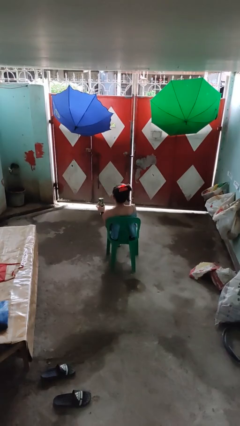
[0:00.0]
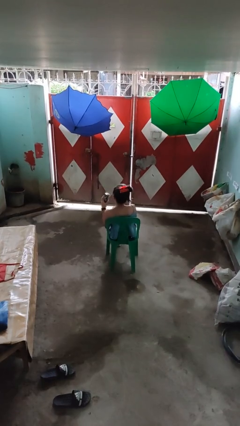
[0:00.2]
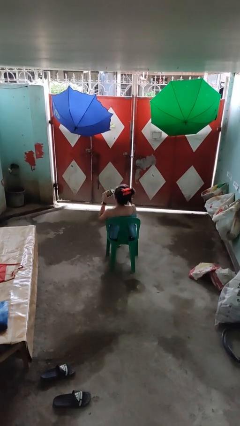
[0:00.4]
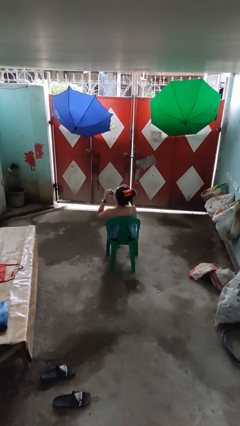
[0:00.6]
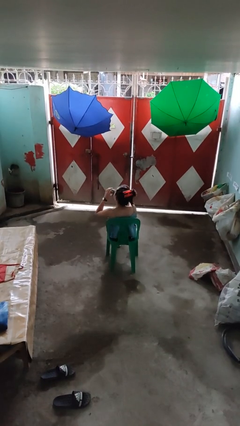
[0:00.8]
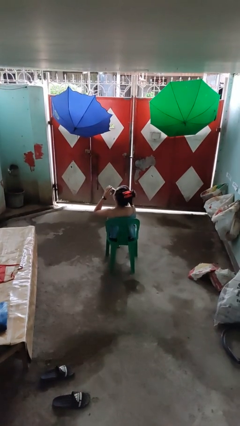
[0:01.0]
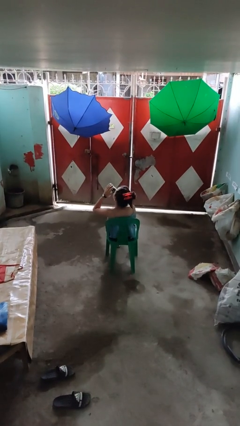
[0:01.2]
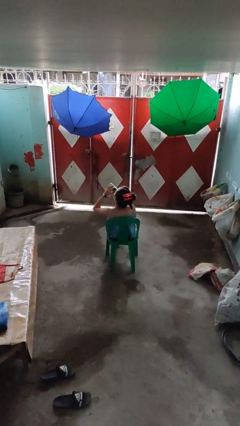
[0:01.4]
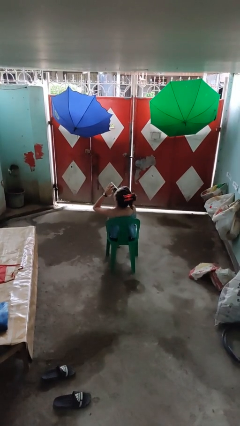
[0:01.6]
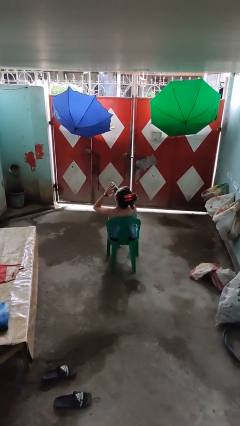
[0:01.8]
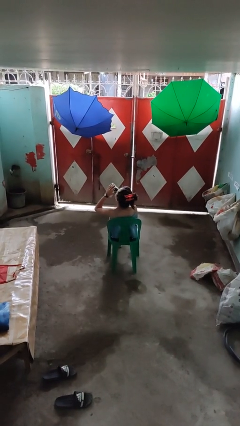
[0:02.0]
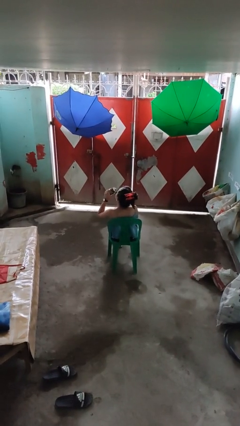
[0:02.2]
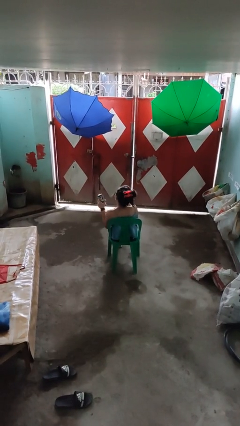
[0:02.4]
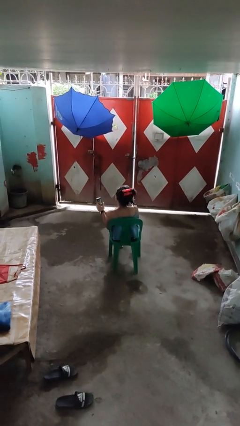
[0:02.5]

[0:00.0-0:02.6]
person drinks from beverage can

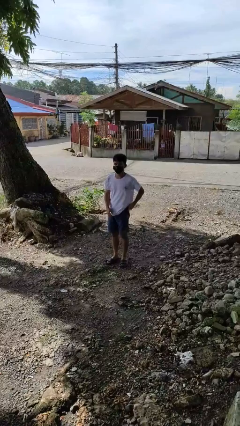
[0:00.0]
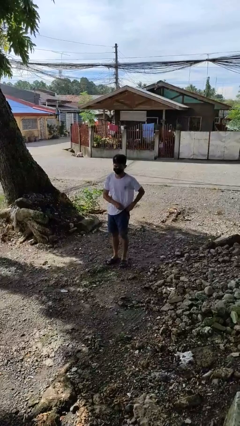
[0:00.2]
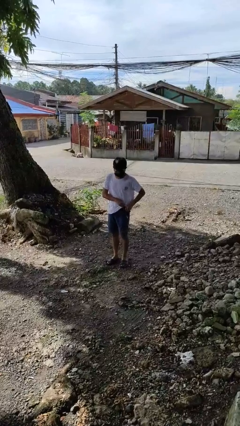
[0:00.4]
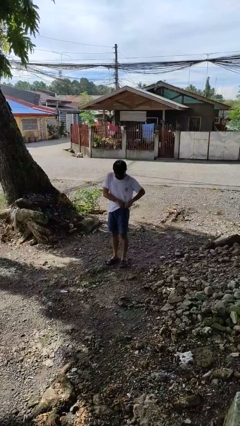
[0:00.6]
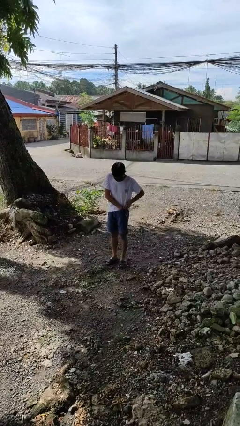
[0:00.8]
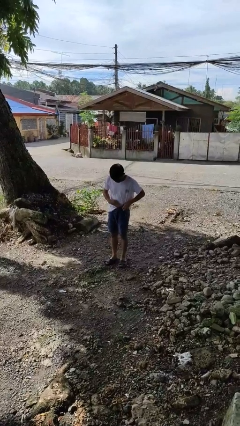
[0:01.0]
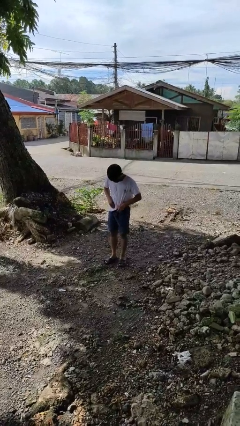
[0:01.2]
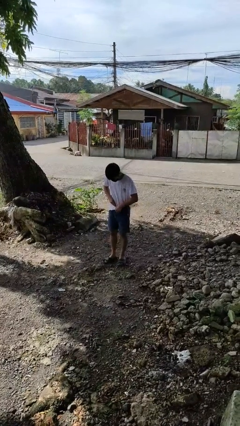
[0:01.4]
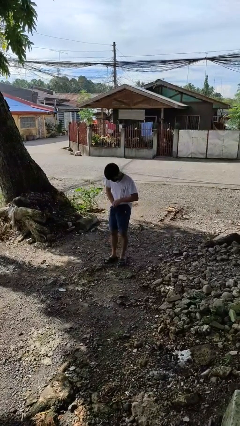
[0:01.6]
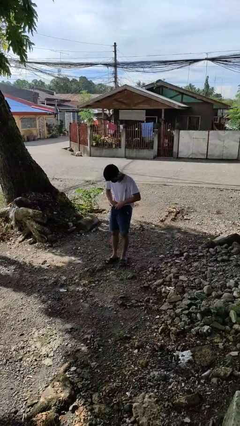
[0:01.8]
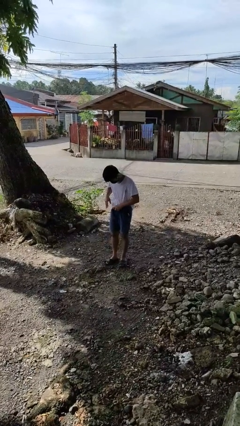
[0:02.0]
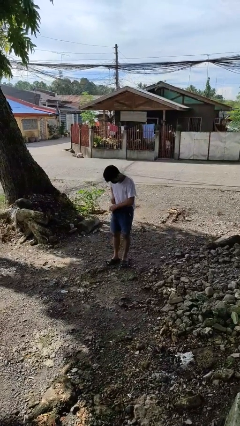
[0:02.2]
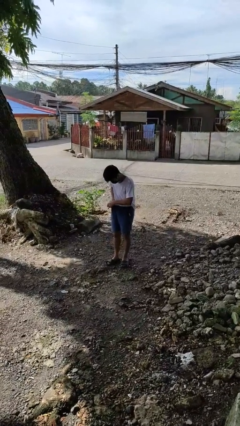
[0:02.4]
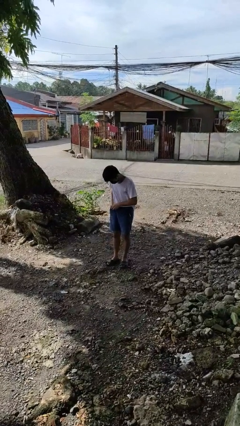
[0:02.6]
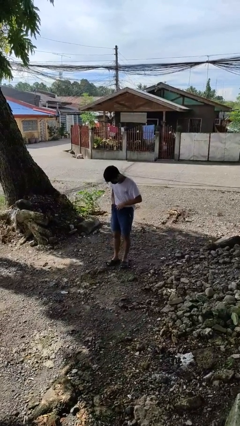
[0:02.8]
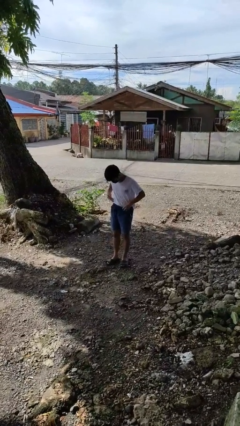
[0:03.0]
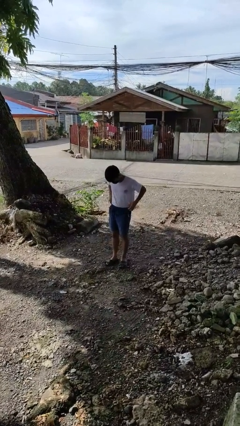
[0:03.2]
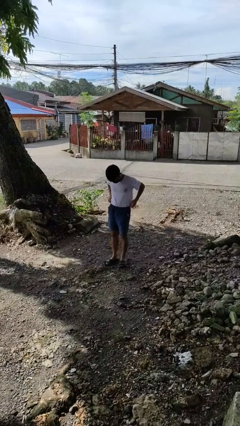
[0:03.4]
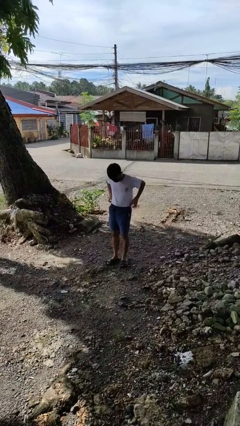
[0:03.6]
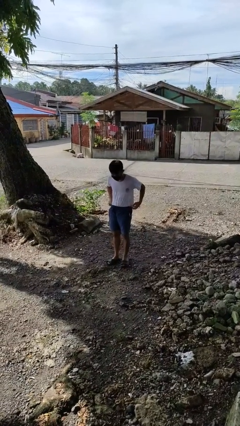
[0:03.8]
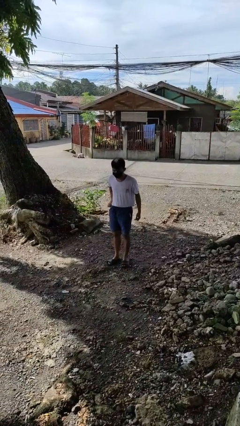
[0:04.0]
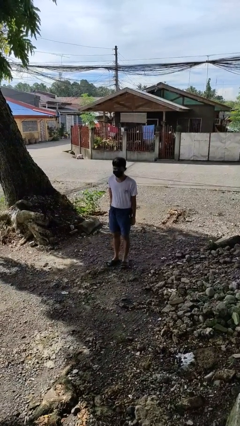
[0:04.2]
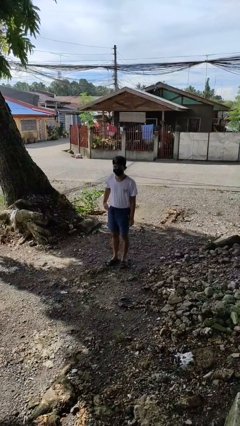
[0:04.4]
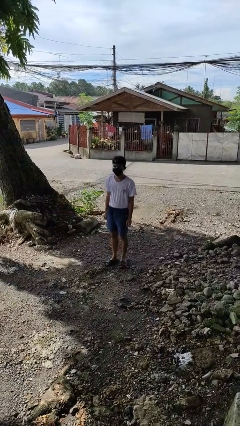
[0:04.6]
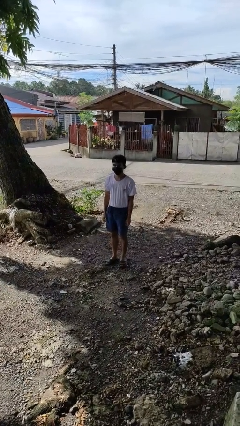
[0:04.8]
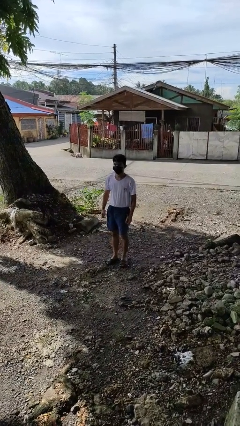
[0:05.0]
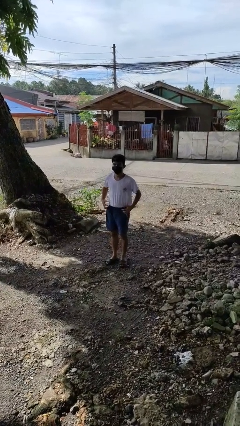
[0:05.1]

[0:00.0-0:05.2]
person tucks in shirt

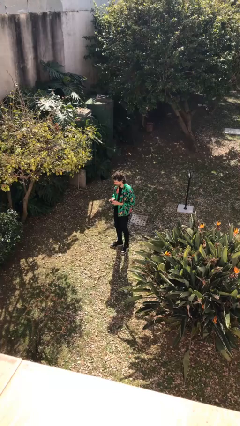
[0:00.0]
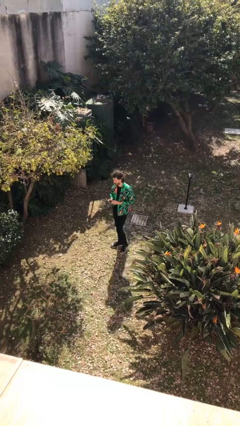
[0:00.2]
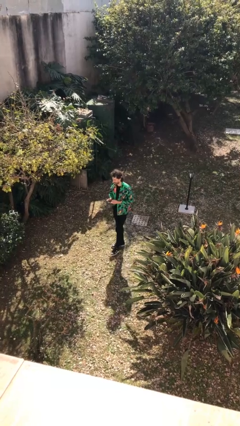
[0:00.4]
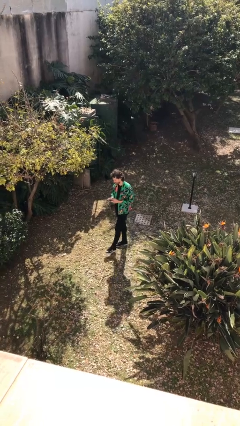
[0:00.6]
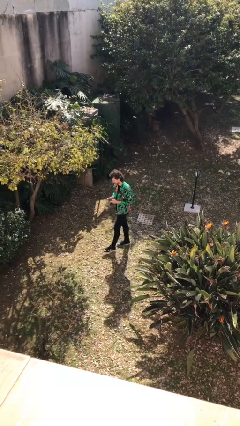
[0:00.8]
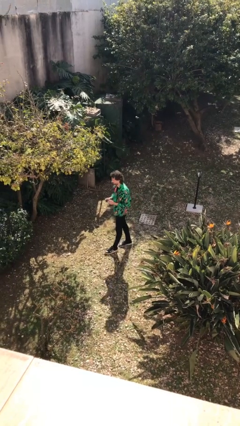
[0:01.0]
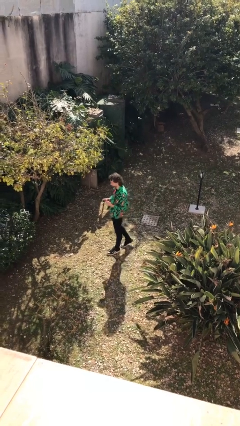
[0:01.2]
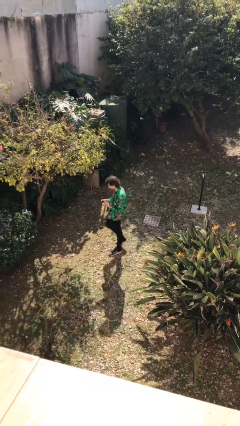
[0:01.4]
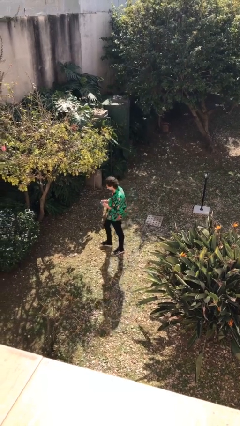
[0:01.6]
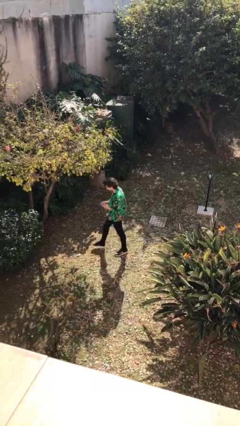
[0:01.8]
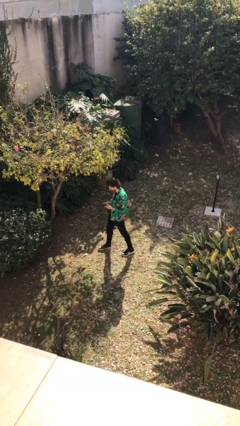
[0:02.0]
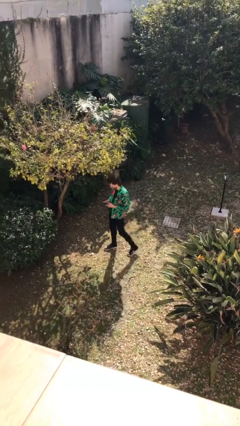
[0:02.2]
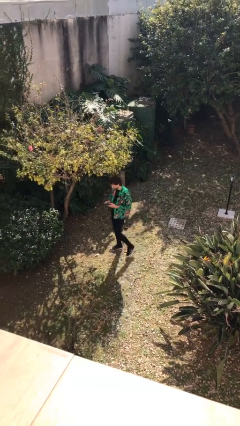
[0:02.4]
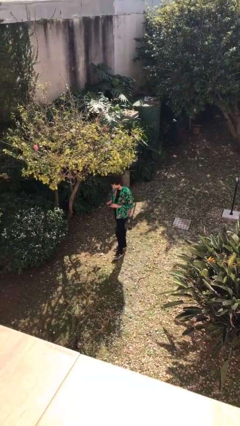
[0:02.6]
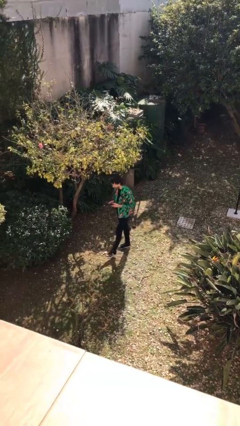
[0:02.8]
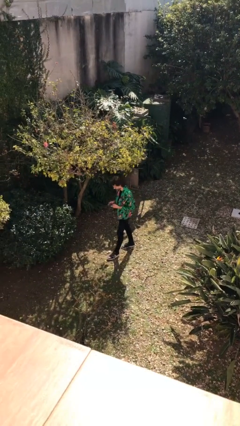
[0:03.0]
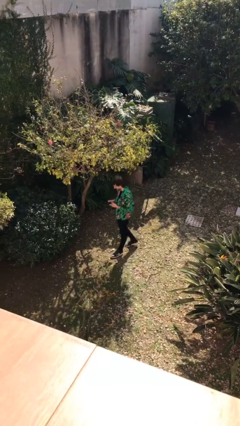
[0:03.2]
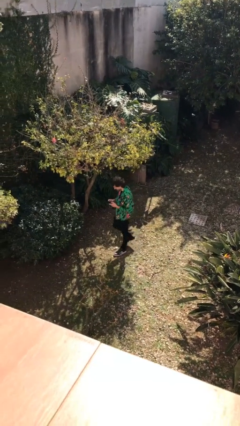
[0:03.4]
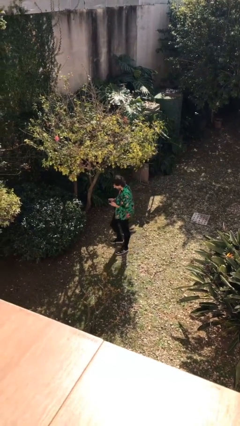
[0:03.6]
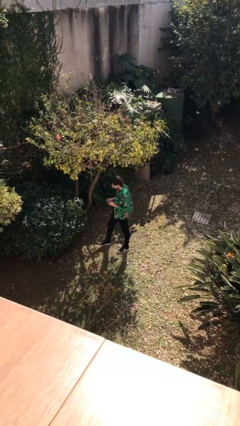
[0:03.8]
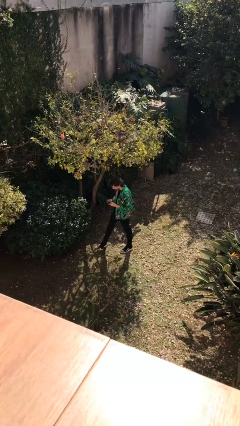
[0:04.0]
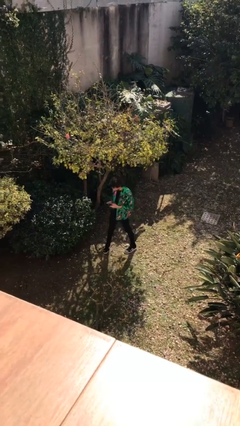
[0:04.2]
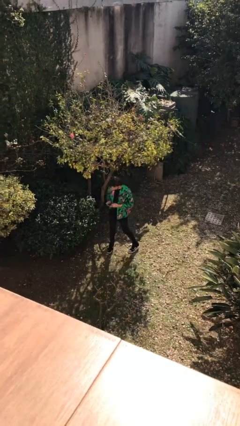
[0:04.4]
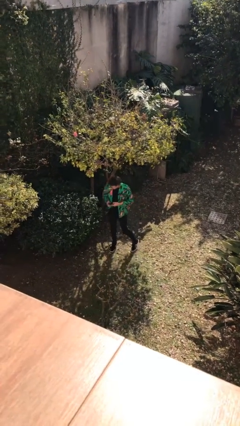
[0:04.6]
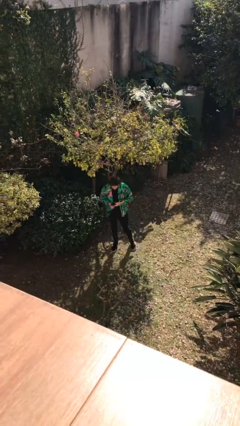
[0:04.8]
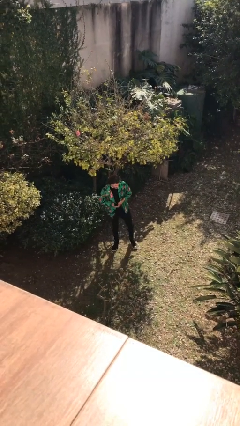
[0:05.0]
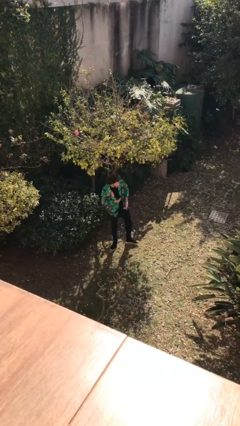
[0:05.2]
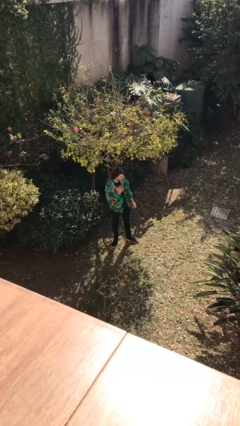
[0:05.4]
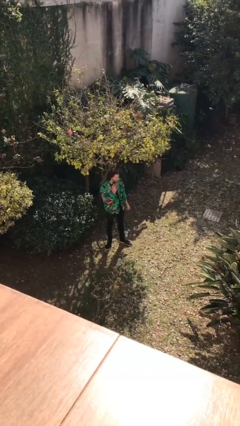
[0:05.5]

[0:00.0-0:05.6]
person texts on phone

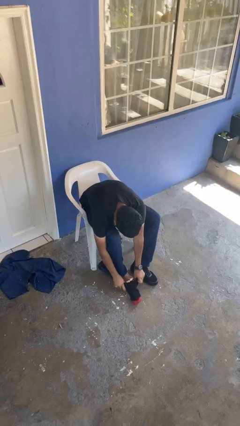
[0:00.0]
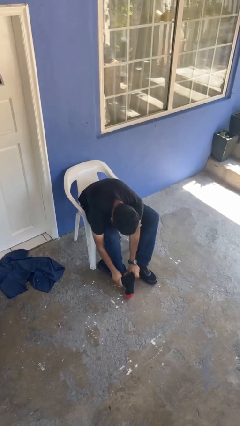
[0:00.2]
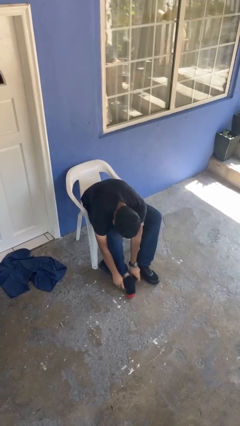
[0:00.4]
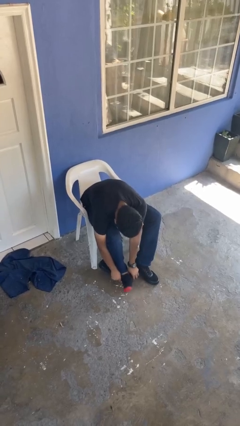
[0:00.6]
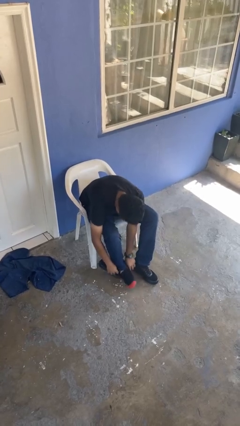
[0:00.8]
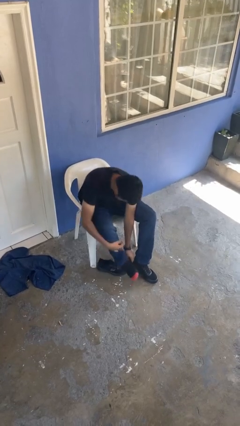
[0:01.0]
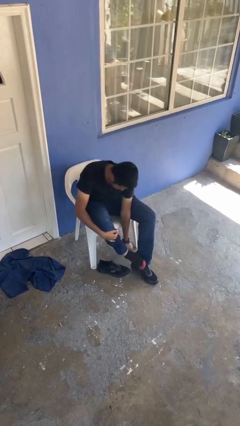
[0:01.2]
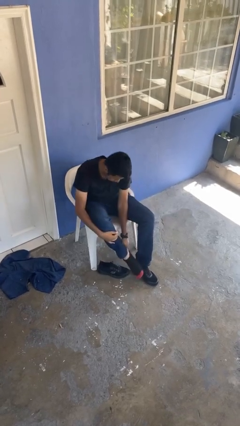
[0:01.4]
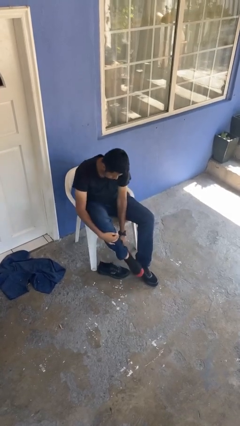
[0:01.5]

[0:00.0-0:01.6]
person puts on socks

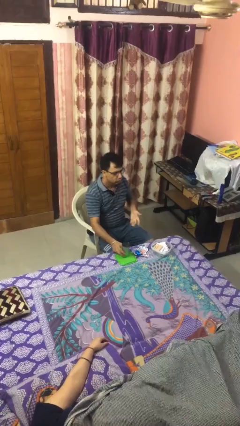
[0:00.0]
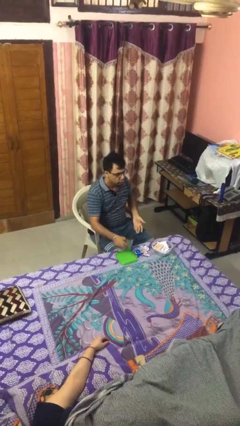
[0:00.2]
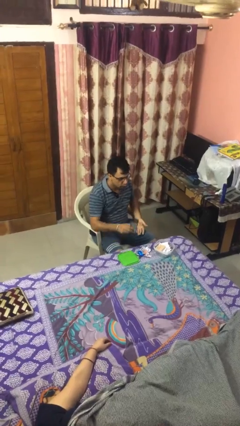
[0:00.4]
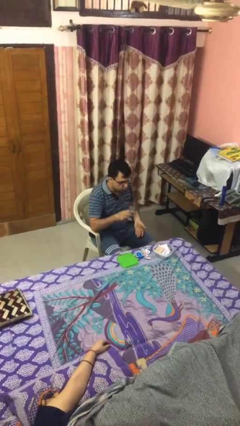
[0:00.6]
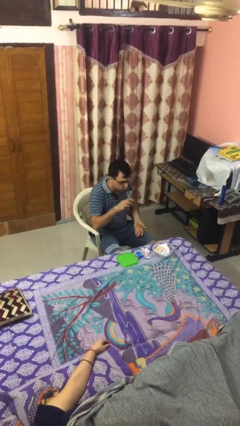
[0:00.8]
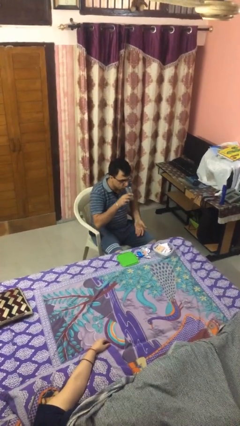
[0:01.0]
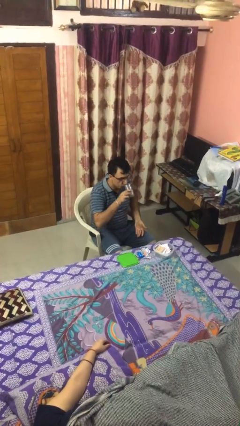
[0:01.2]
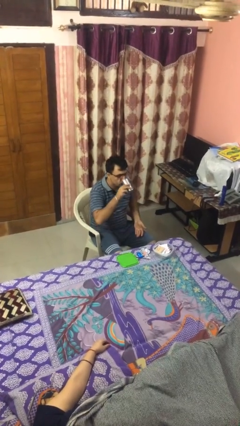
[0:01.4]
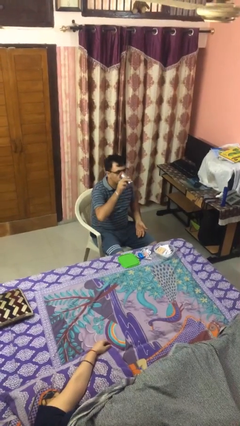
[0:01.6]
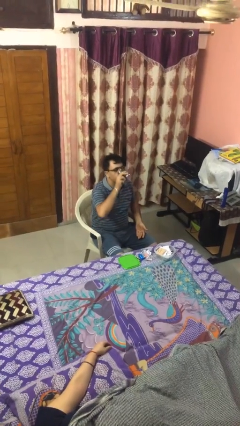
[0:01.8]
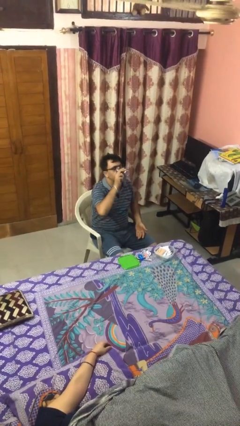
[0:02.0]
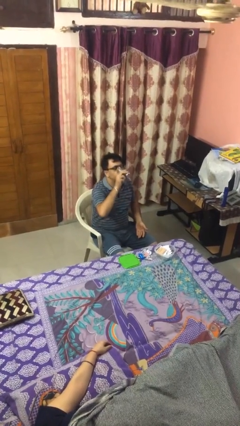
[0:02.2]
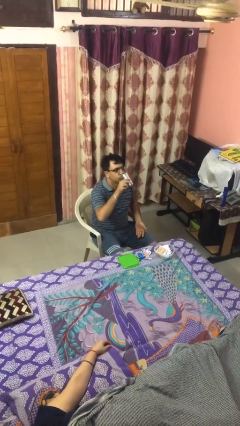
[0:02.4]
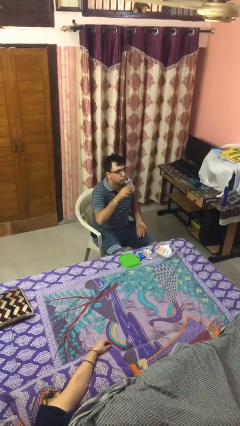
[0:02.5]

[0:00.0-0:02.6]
person drinks from cup

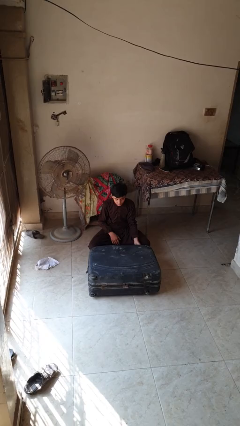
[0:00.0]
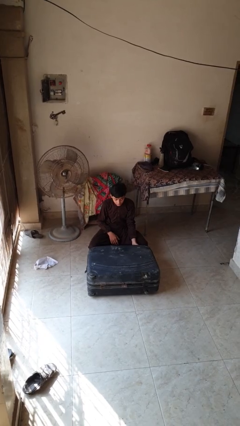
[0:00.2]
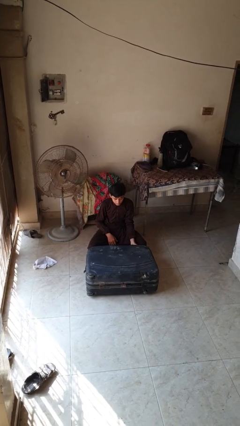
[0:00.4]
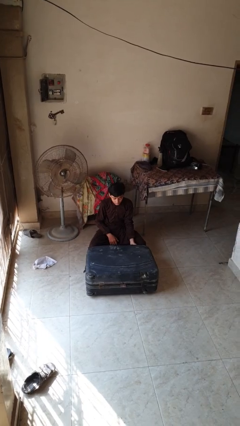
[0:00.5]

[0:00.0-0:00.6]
person closes suitcase
